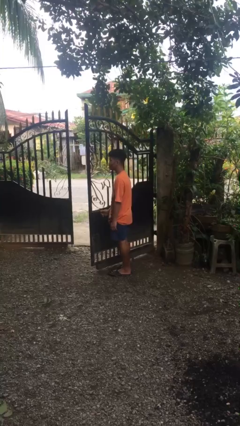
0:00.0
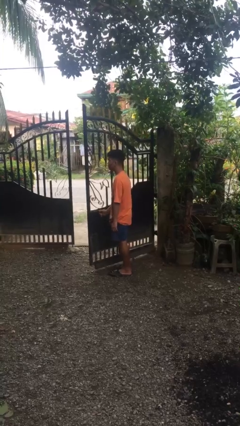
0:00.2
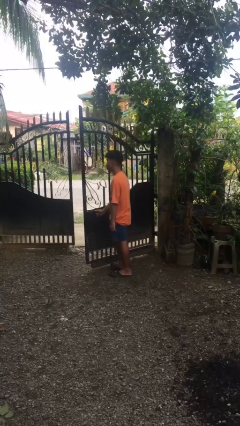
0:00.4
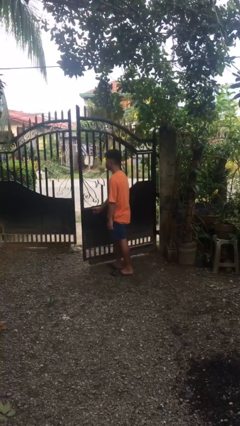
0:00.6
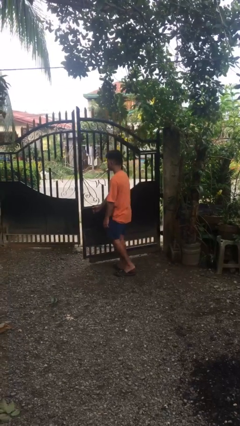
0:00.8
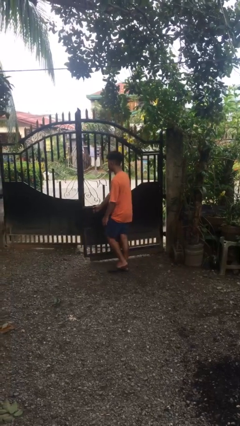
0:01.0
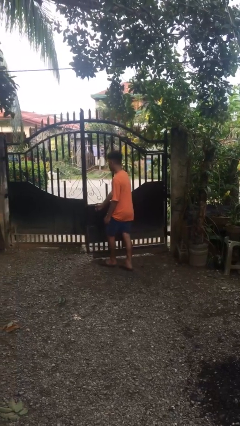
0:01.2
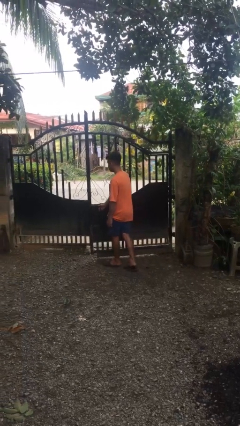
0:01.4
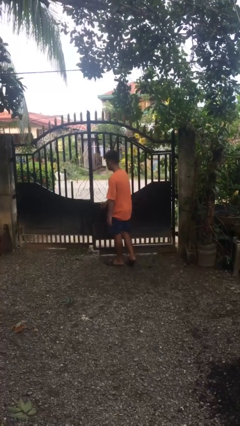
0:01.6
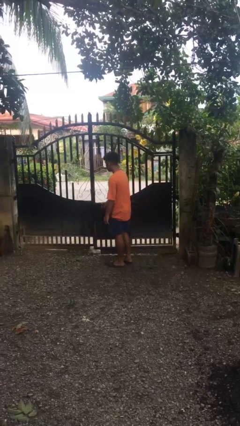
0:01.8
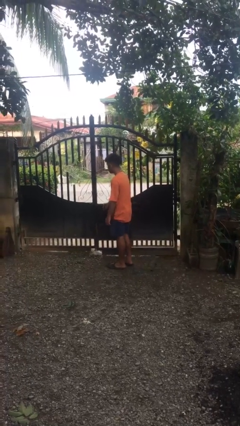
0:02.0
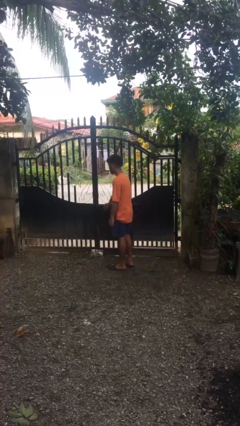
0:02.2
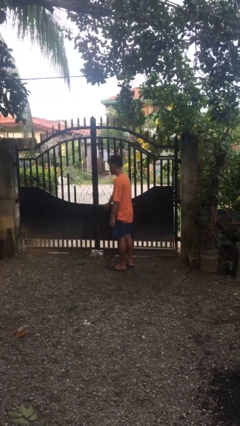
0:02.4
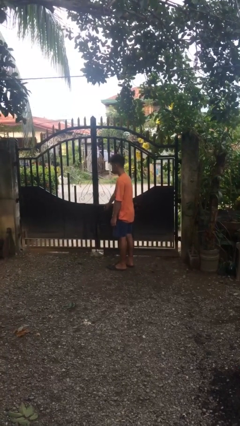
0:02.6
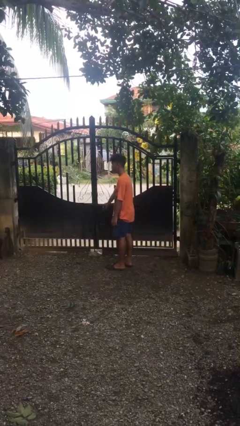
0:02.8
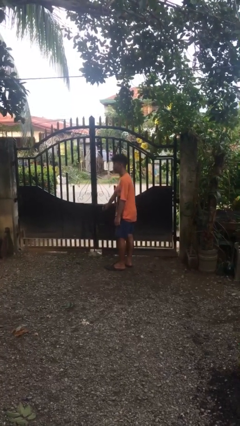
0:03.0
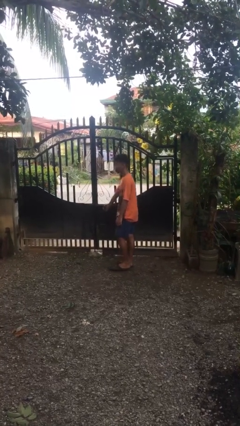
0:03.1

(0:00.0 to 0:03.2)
person closes gate

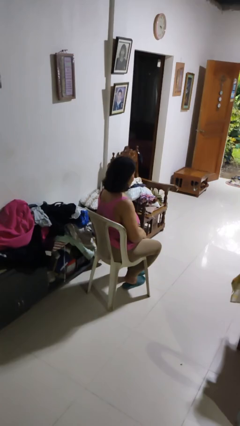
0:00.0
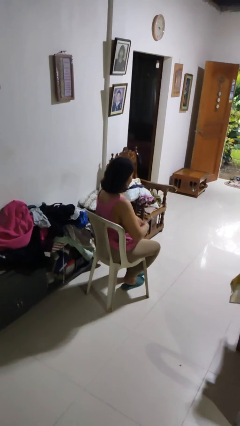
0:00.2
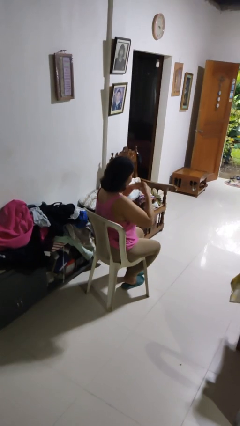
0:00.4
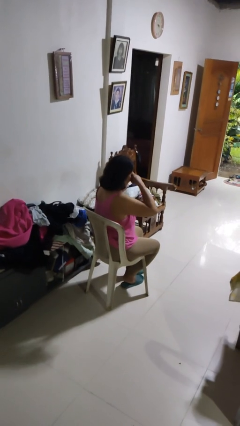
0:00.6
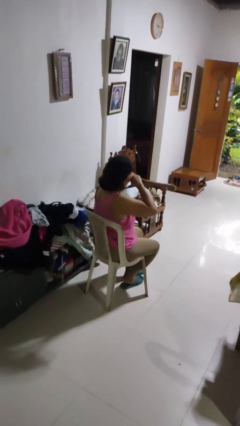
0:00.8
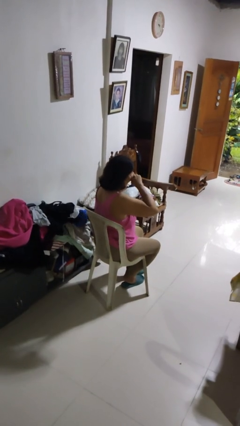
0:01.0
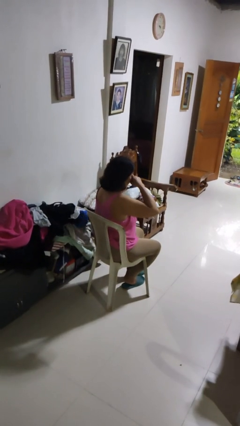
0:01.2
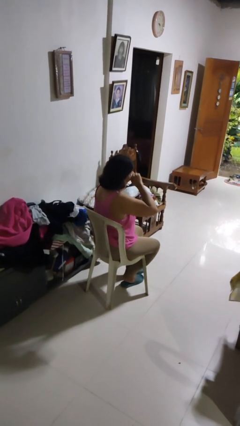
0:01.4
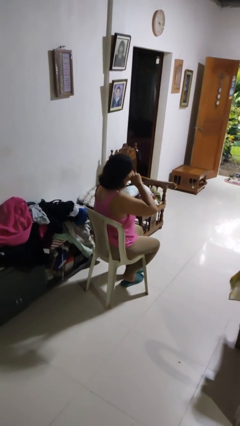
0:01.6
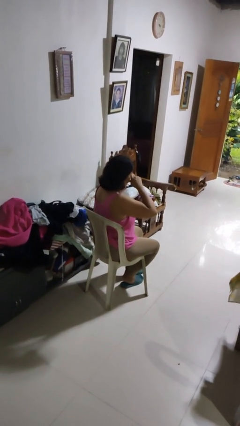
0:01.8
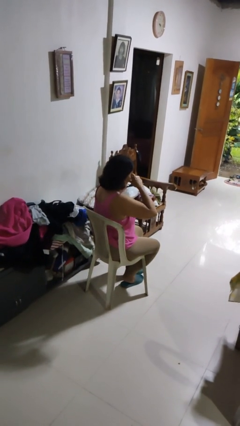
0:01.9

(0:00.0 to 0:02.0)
person rubs eyes

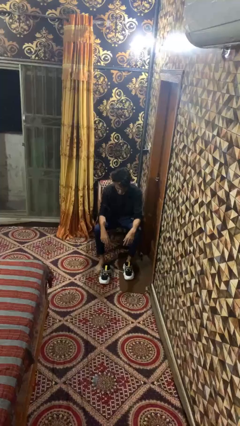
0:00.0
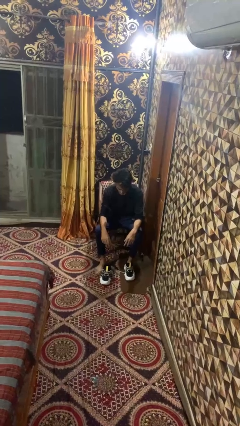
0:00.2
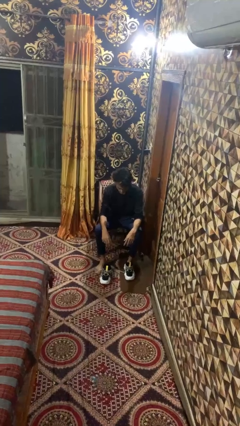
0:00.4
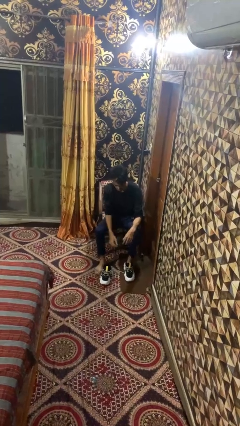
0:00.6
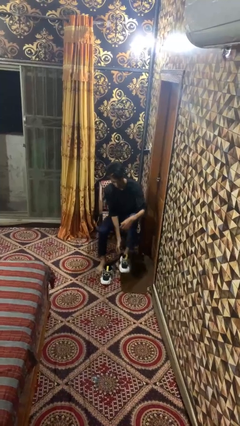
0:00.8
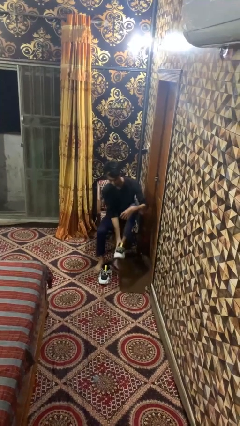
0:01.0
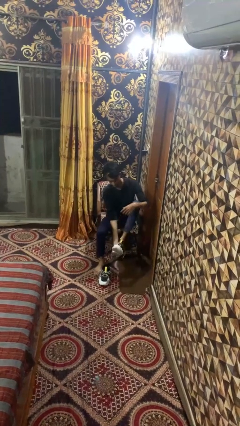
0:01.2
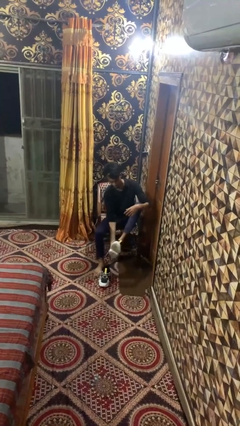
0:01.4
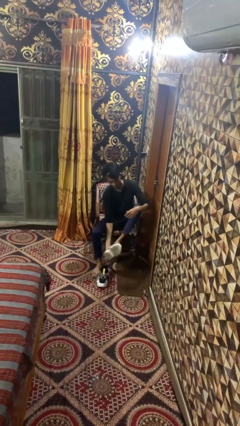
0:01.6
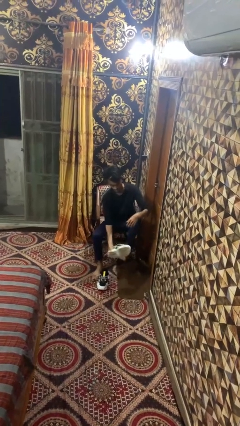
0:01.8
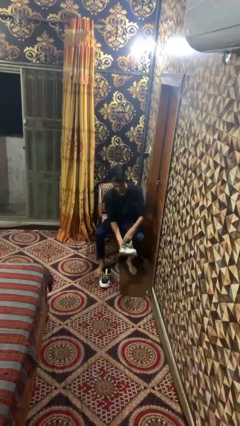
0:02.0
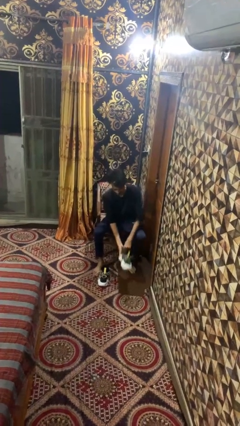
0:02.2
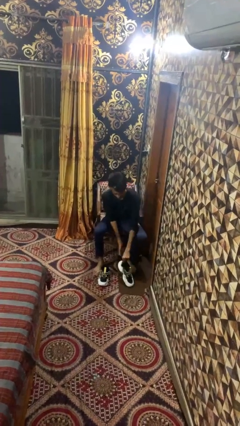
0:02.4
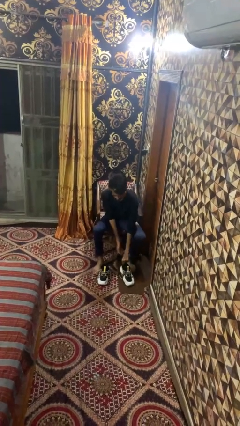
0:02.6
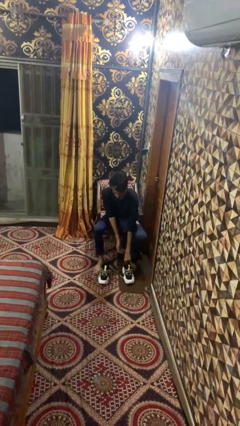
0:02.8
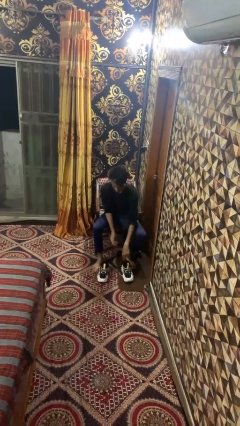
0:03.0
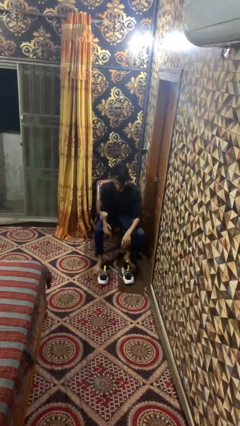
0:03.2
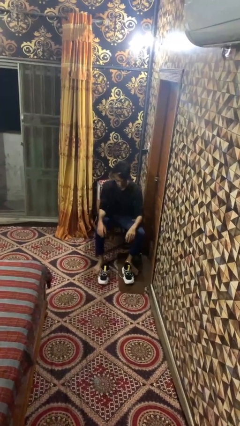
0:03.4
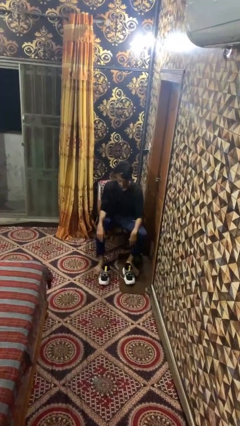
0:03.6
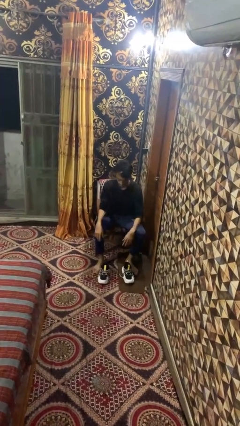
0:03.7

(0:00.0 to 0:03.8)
person takes off shoes

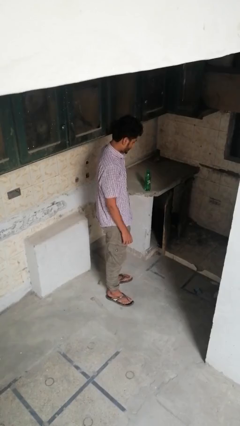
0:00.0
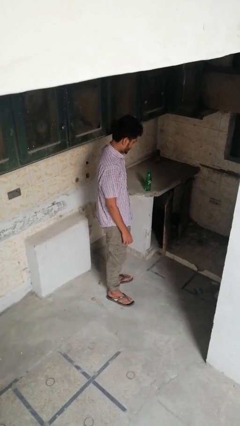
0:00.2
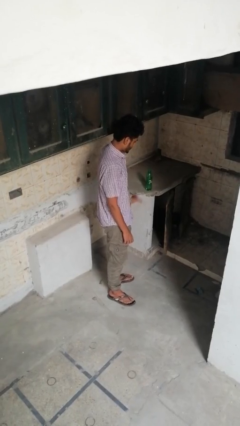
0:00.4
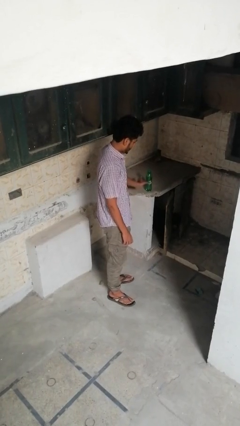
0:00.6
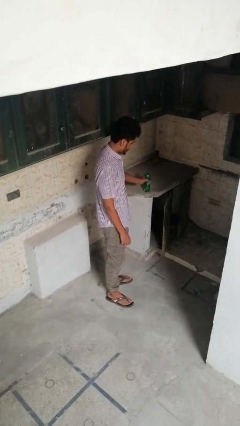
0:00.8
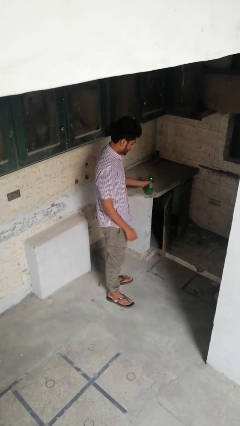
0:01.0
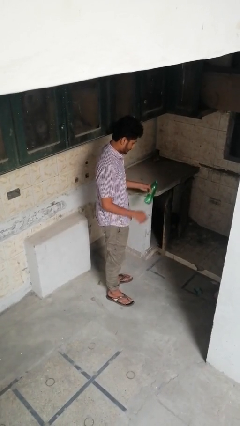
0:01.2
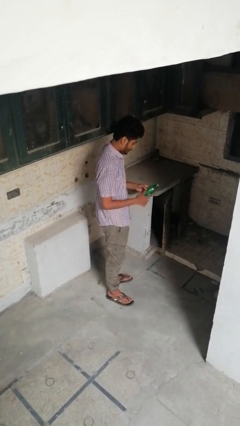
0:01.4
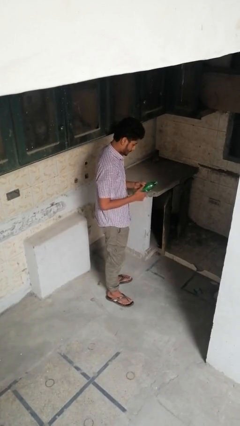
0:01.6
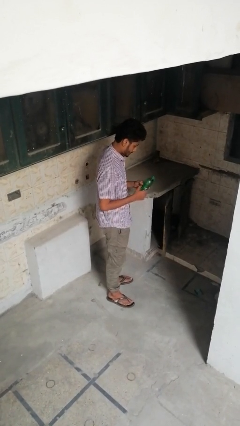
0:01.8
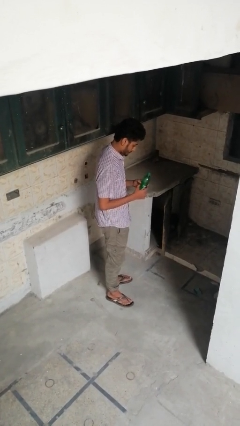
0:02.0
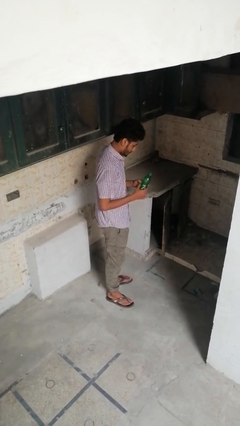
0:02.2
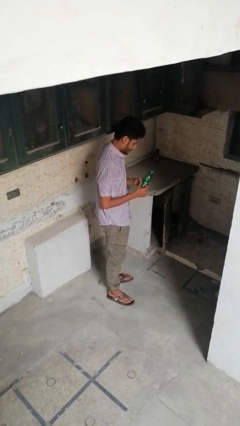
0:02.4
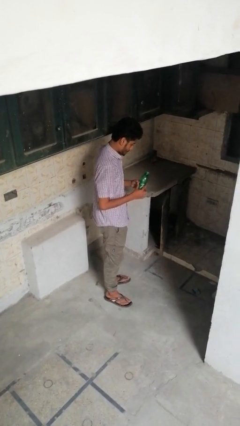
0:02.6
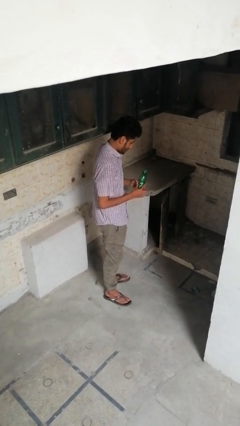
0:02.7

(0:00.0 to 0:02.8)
person picks up object from countertop

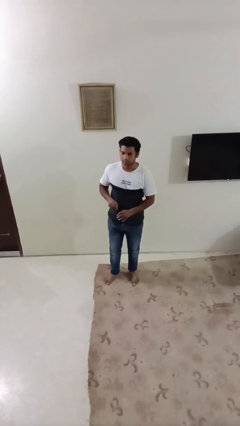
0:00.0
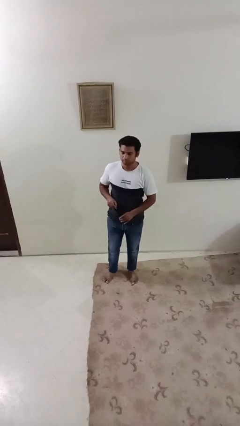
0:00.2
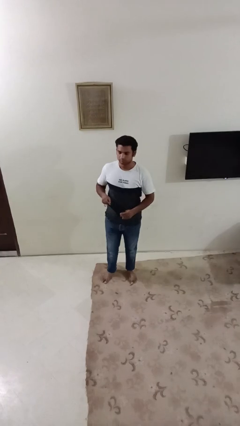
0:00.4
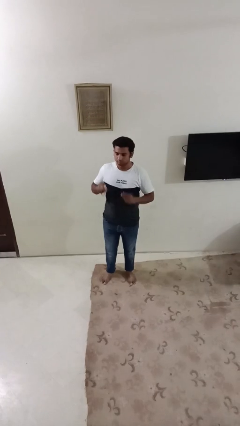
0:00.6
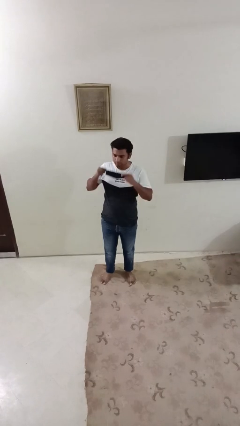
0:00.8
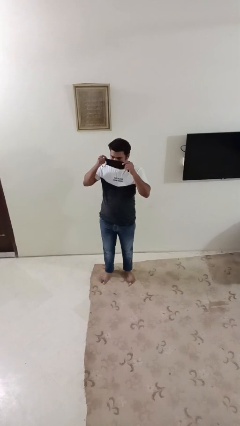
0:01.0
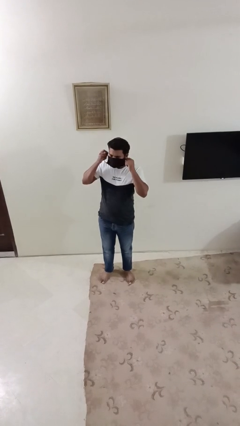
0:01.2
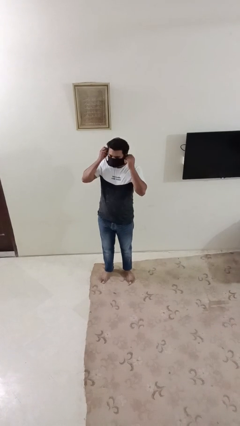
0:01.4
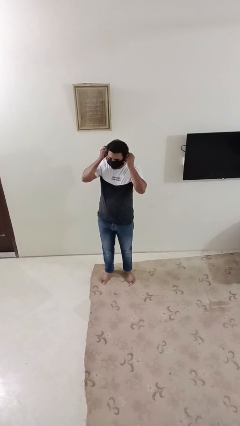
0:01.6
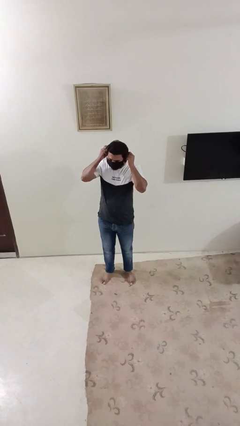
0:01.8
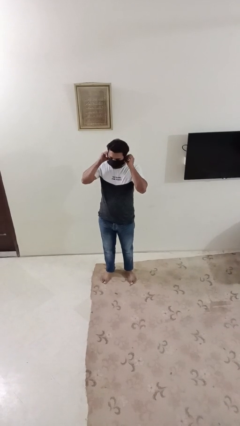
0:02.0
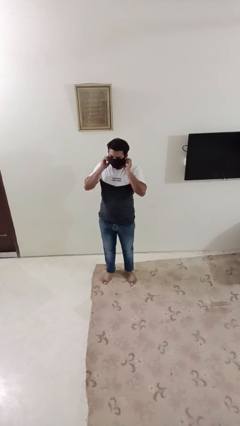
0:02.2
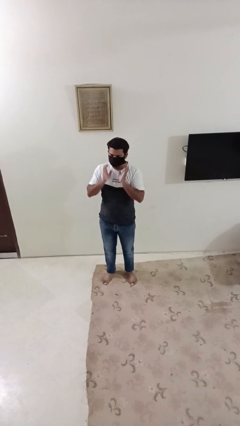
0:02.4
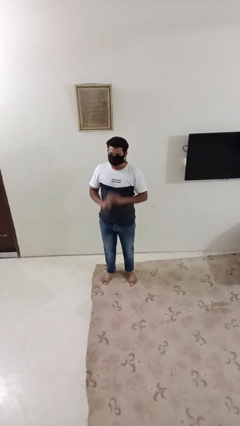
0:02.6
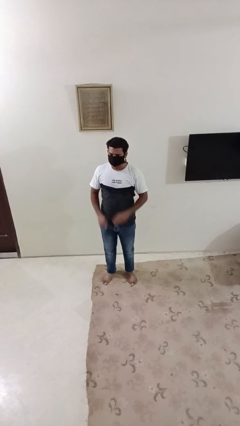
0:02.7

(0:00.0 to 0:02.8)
person puts on facemask

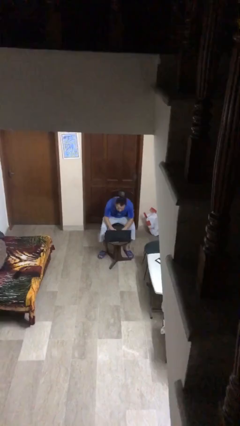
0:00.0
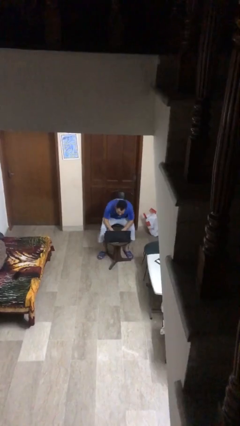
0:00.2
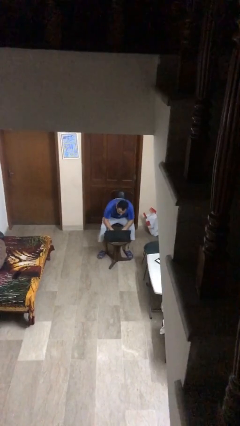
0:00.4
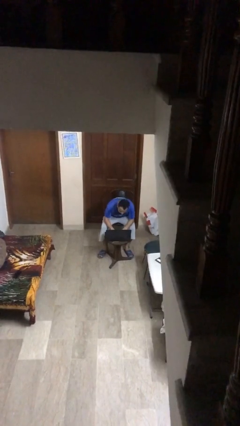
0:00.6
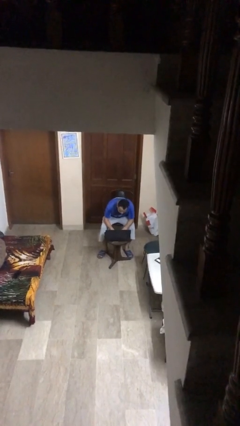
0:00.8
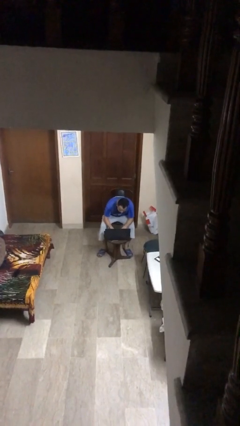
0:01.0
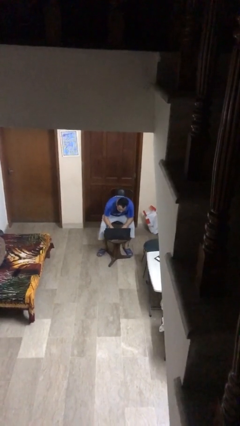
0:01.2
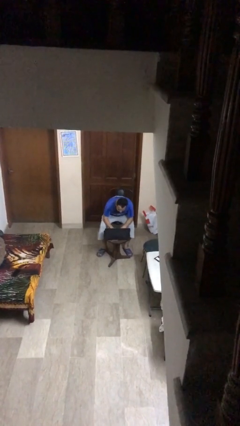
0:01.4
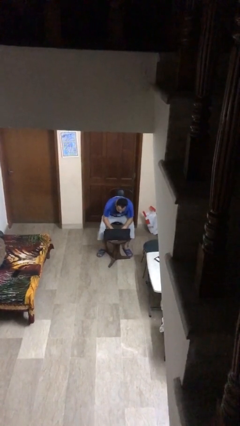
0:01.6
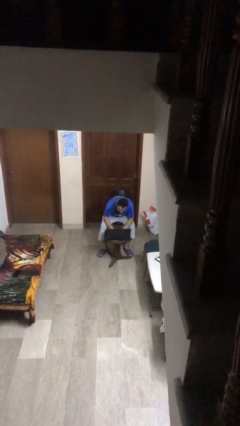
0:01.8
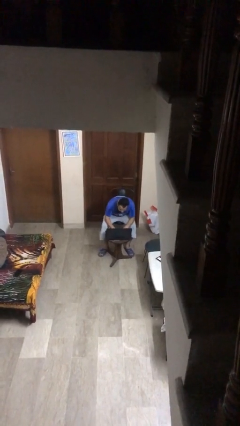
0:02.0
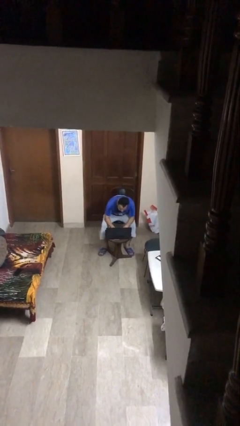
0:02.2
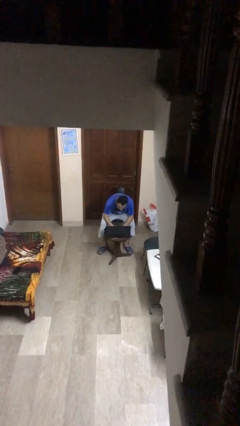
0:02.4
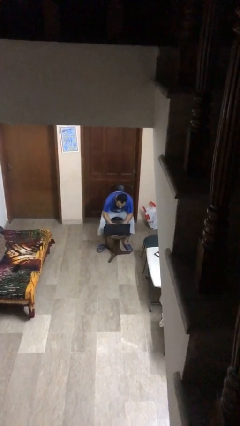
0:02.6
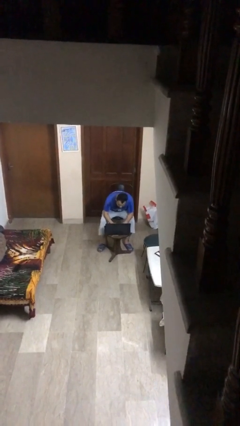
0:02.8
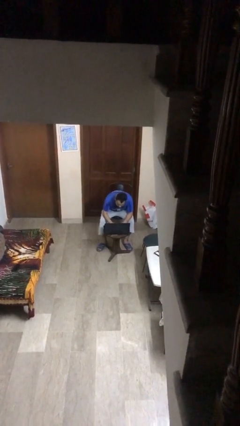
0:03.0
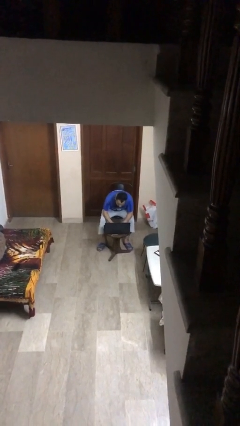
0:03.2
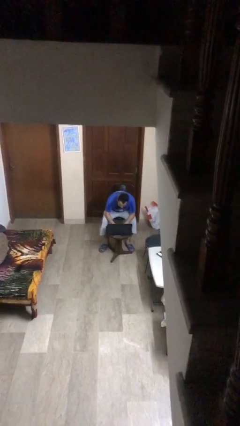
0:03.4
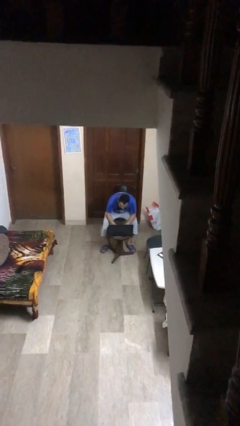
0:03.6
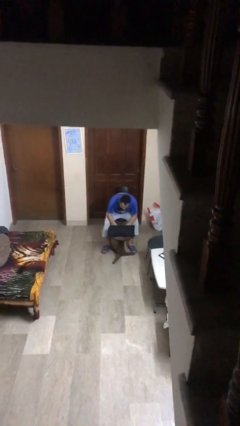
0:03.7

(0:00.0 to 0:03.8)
person interacts with laptop
